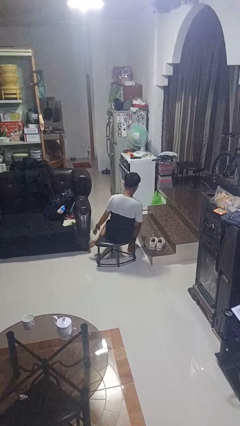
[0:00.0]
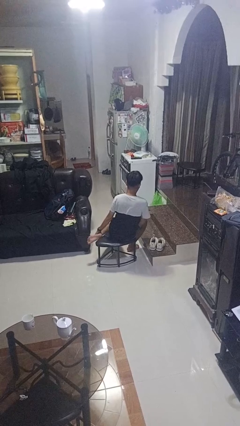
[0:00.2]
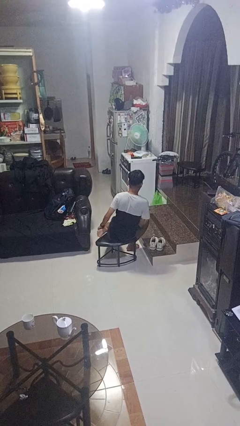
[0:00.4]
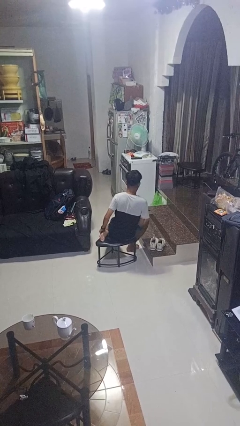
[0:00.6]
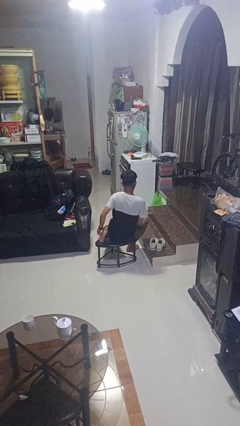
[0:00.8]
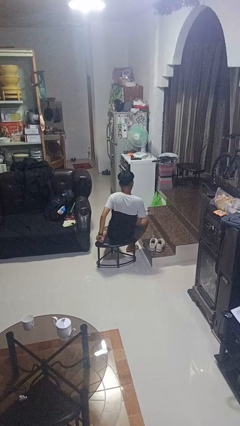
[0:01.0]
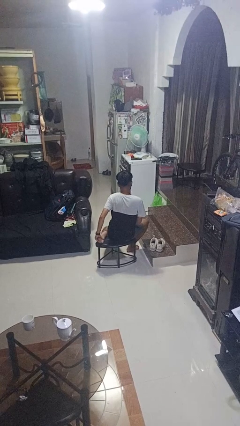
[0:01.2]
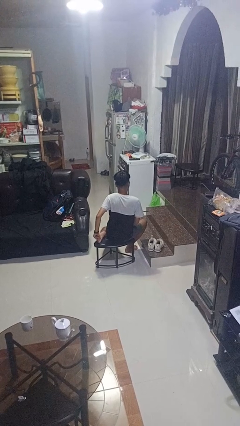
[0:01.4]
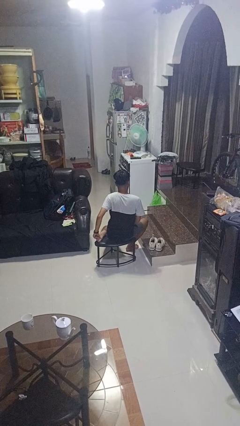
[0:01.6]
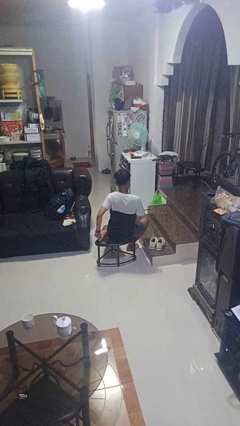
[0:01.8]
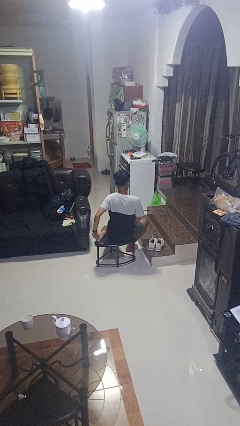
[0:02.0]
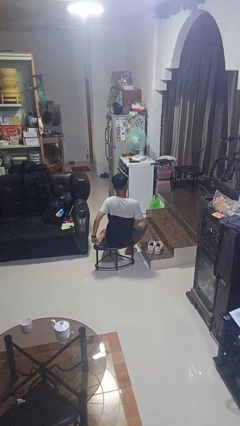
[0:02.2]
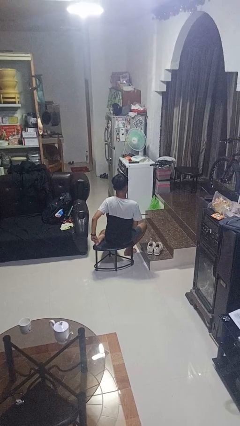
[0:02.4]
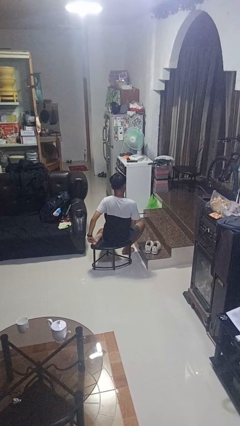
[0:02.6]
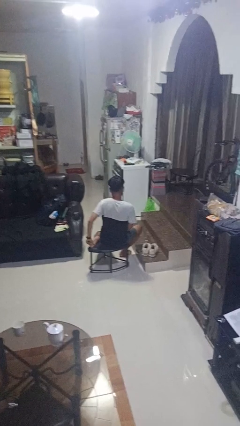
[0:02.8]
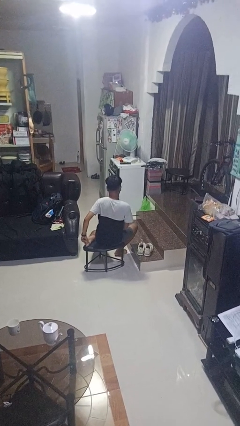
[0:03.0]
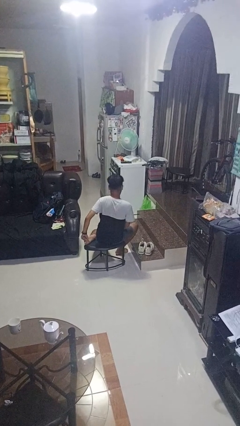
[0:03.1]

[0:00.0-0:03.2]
person rubs foot

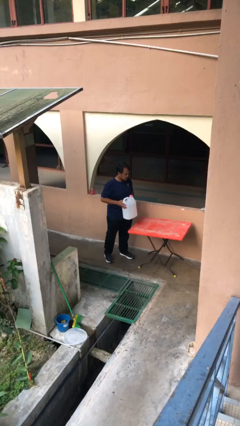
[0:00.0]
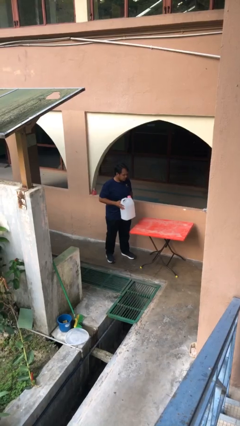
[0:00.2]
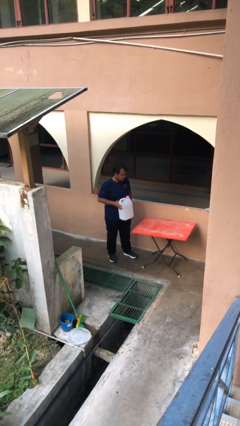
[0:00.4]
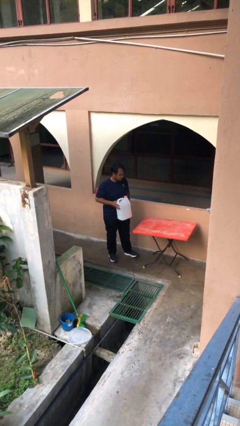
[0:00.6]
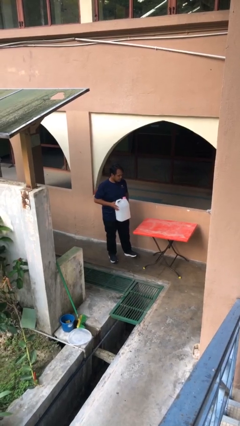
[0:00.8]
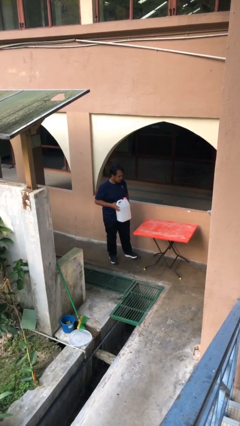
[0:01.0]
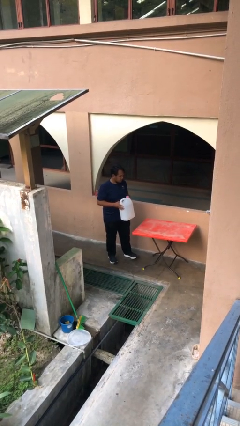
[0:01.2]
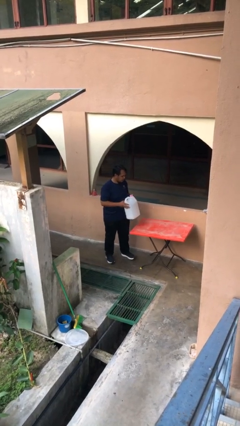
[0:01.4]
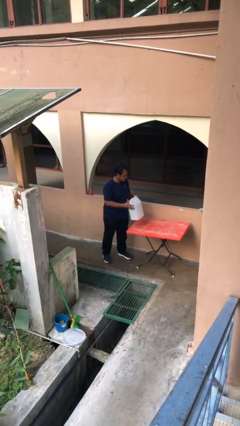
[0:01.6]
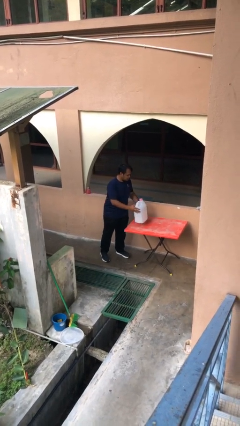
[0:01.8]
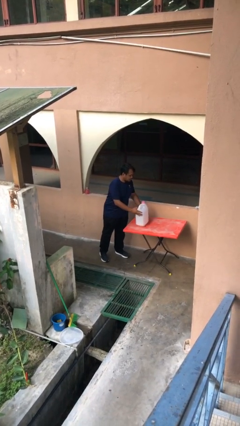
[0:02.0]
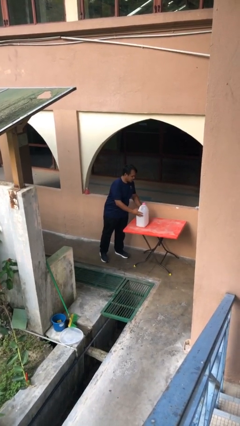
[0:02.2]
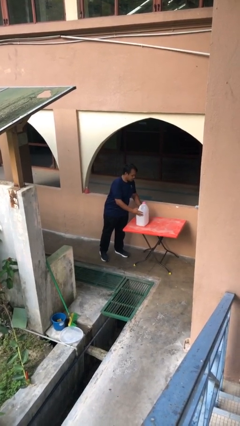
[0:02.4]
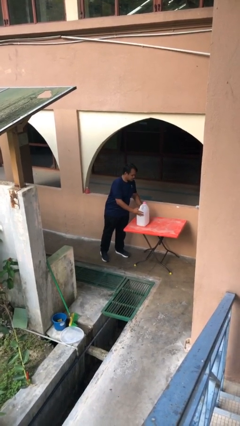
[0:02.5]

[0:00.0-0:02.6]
person puts down object on table

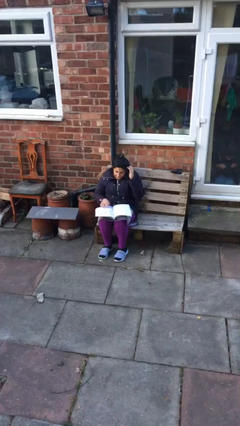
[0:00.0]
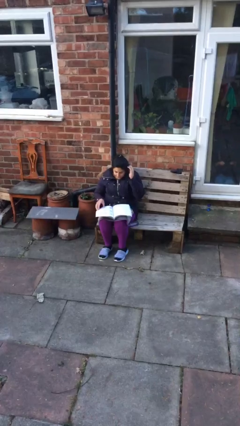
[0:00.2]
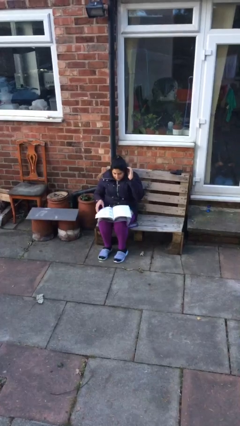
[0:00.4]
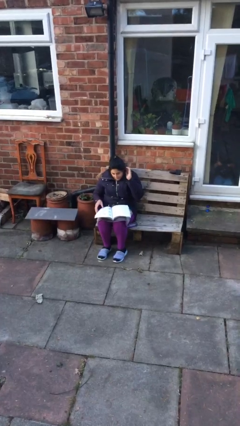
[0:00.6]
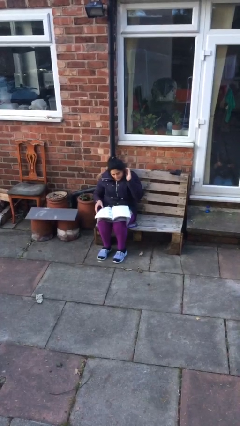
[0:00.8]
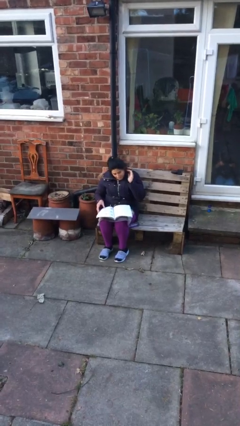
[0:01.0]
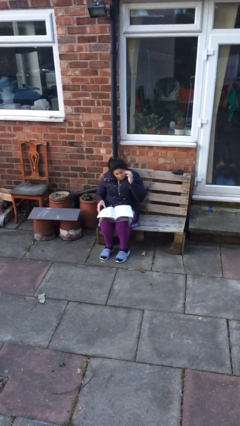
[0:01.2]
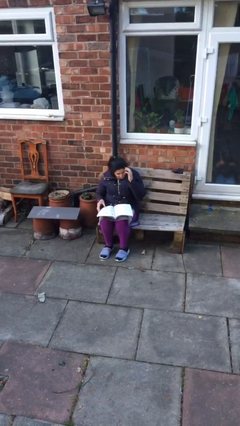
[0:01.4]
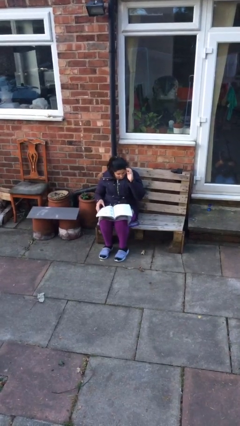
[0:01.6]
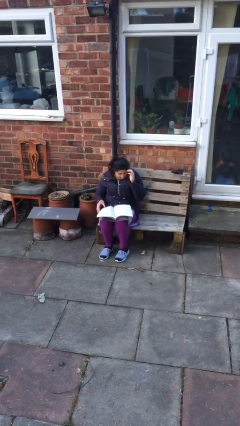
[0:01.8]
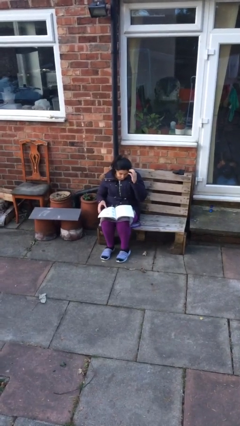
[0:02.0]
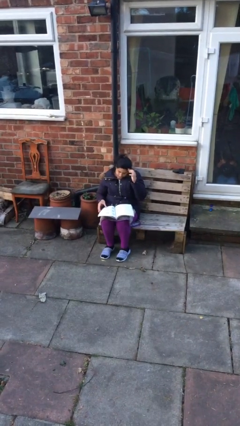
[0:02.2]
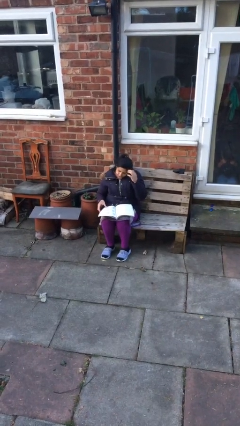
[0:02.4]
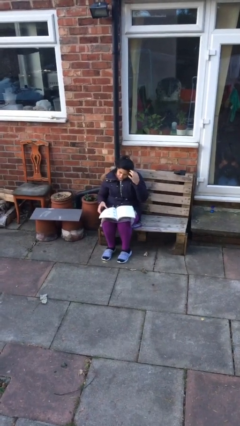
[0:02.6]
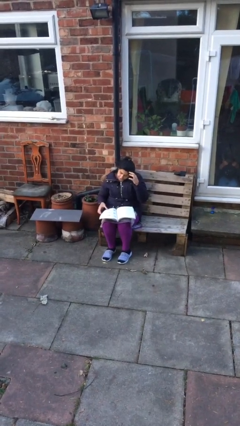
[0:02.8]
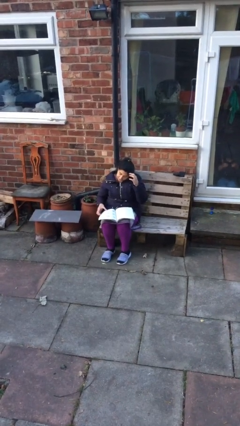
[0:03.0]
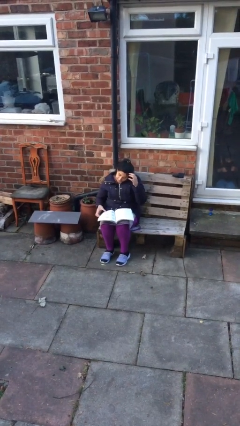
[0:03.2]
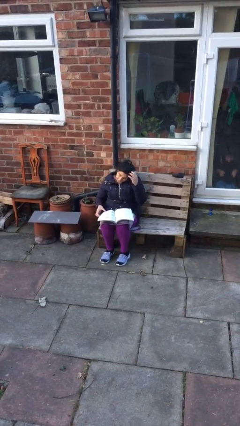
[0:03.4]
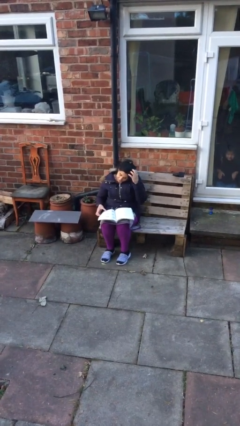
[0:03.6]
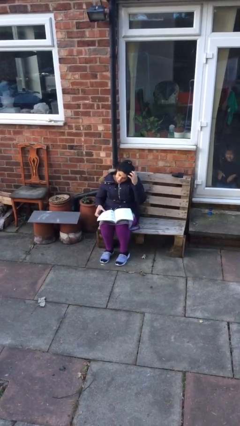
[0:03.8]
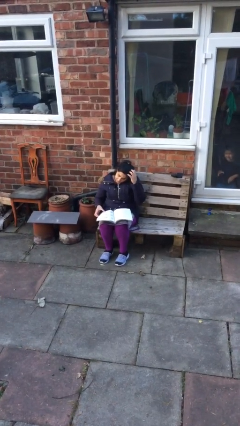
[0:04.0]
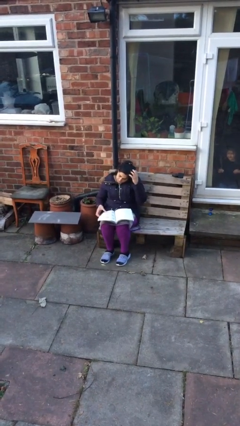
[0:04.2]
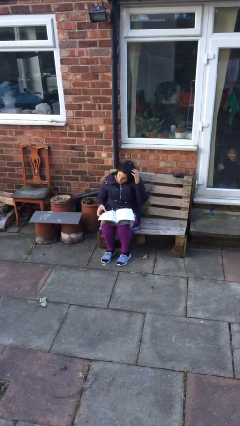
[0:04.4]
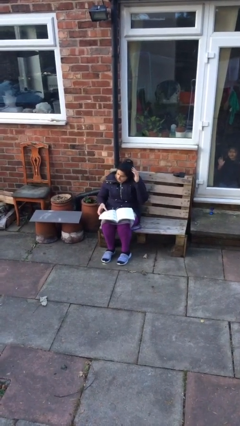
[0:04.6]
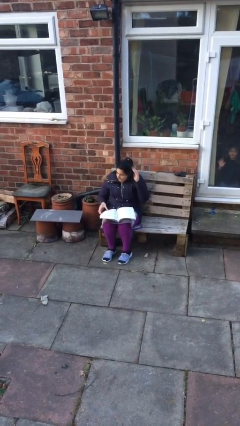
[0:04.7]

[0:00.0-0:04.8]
person reads document

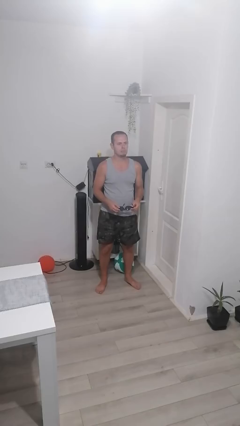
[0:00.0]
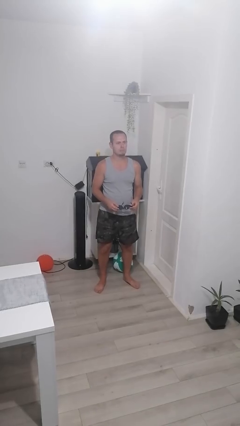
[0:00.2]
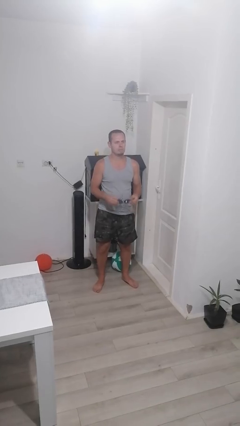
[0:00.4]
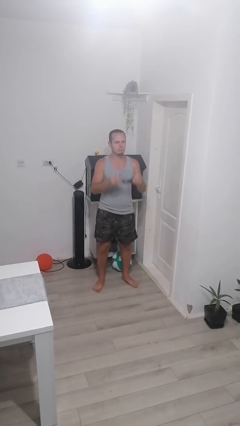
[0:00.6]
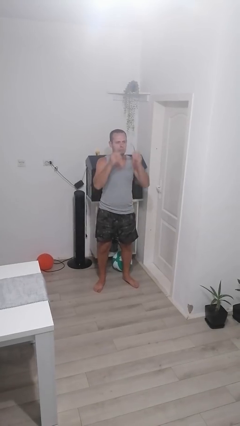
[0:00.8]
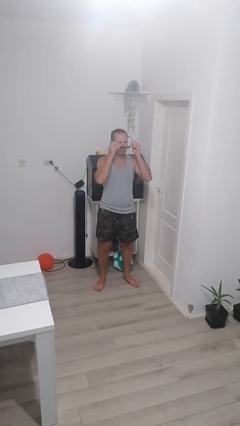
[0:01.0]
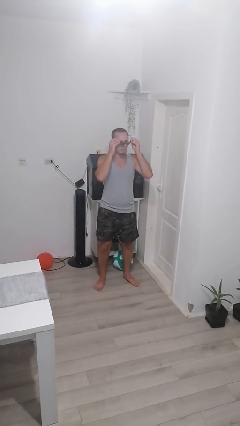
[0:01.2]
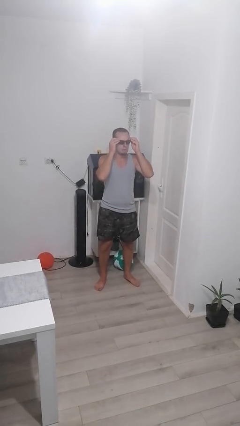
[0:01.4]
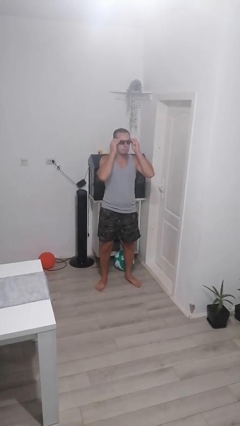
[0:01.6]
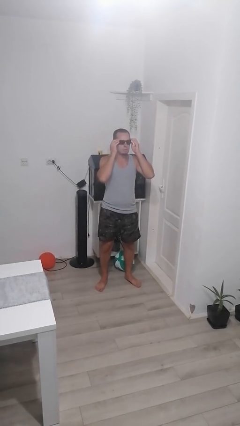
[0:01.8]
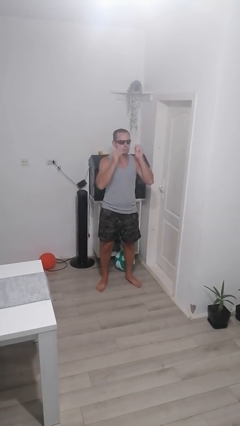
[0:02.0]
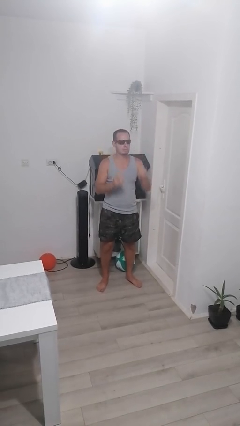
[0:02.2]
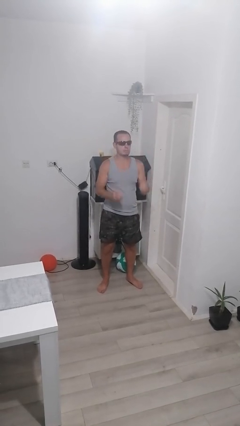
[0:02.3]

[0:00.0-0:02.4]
person puts on sunglasses

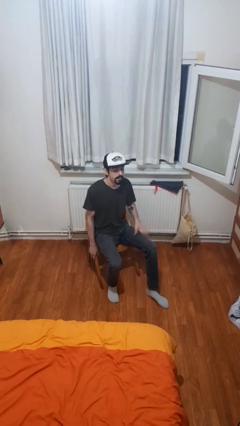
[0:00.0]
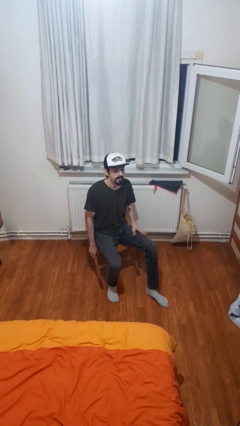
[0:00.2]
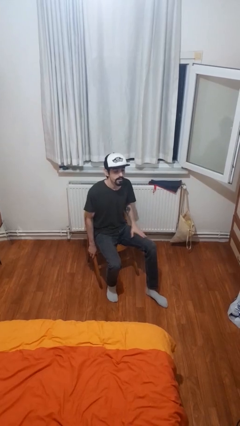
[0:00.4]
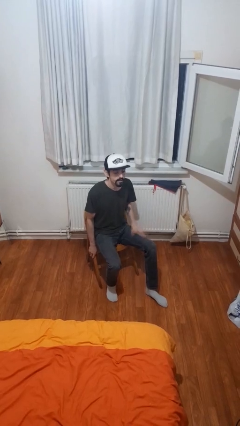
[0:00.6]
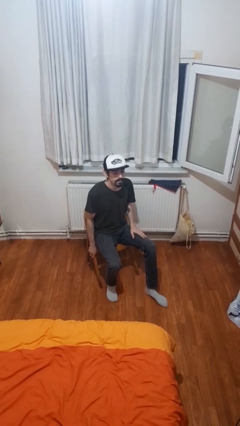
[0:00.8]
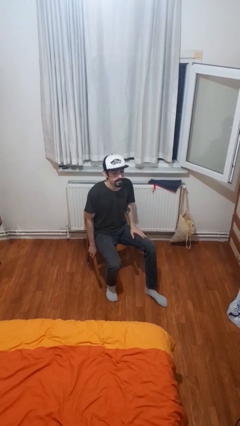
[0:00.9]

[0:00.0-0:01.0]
person slaps hands on thighs

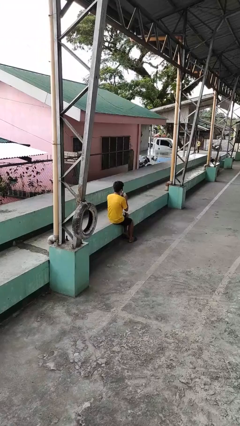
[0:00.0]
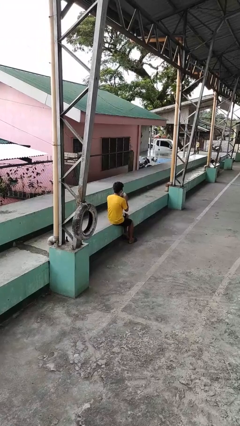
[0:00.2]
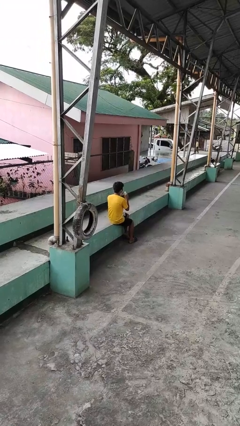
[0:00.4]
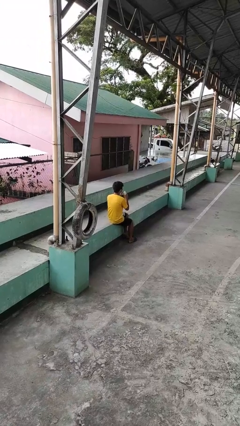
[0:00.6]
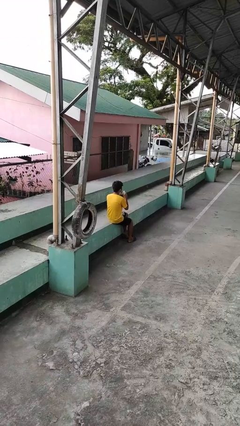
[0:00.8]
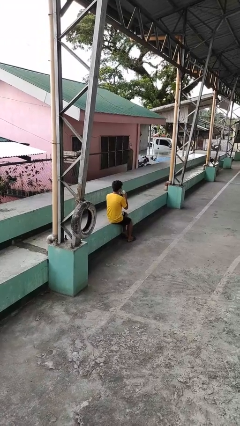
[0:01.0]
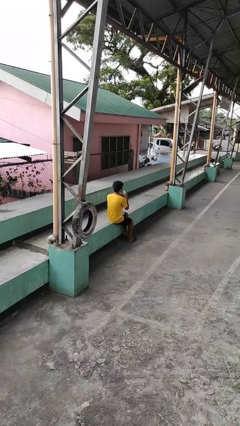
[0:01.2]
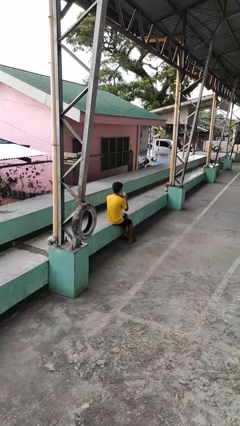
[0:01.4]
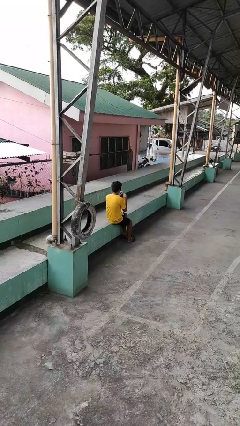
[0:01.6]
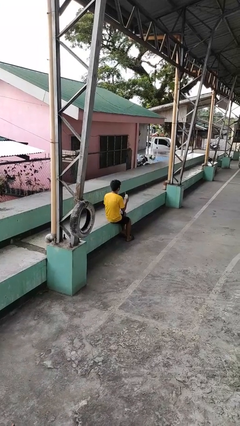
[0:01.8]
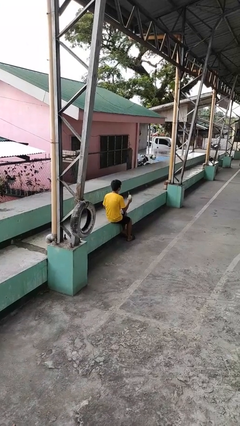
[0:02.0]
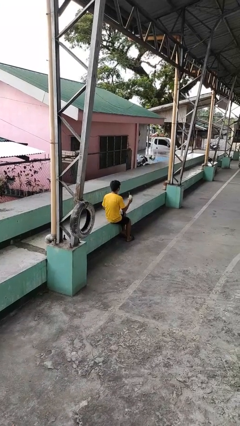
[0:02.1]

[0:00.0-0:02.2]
person drinks from straw

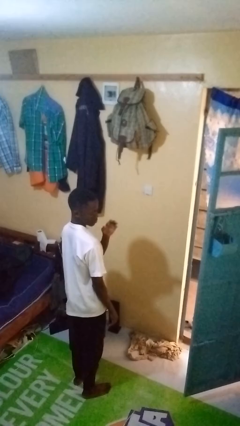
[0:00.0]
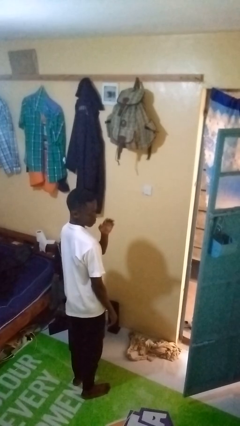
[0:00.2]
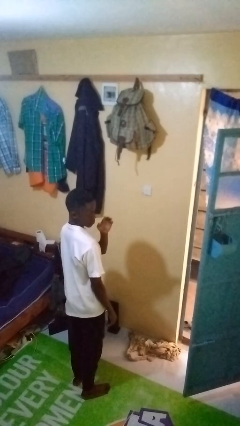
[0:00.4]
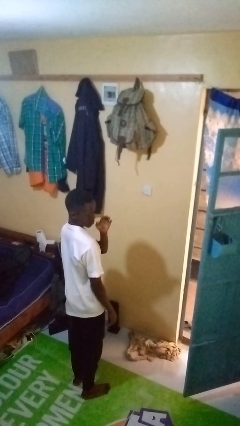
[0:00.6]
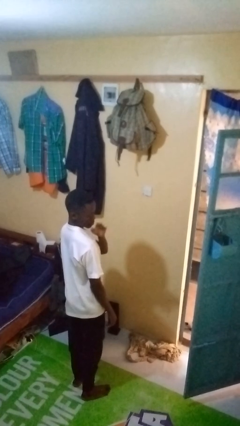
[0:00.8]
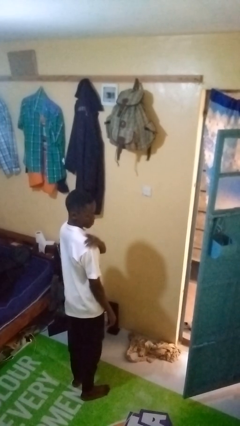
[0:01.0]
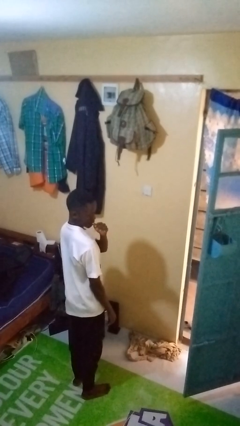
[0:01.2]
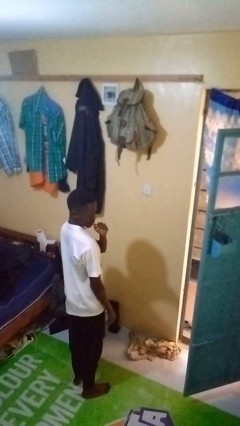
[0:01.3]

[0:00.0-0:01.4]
person swats bug
